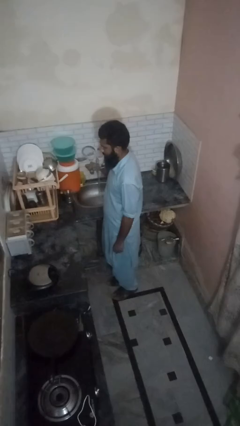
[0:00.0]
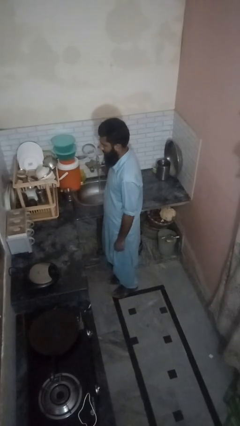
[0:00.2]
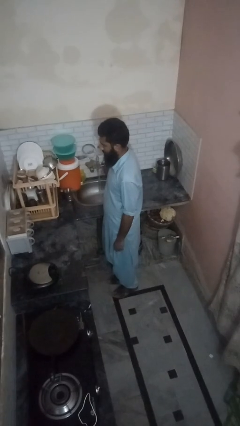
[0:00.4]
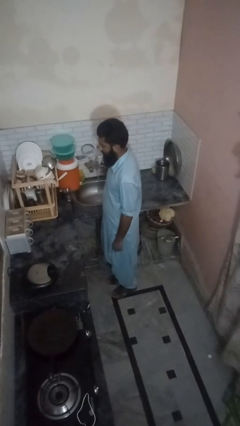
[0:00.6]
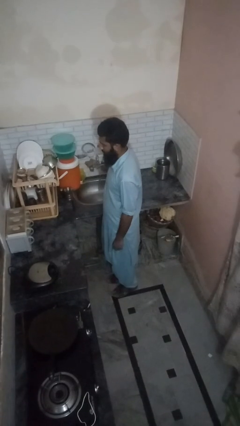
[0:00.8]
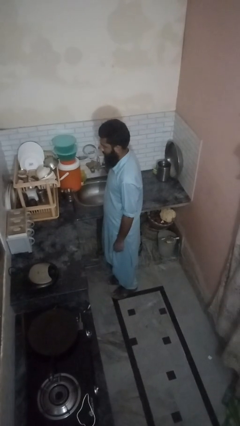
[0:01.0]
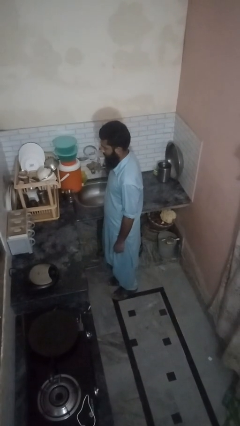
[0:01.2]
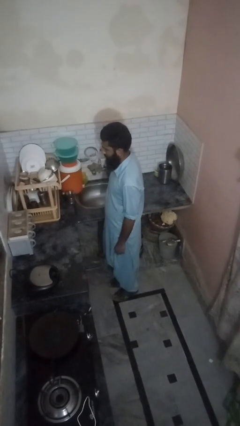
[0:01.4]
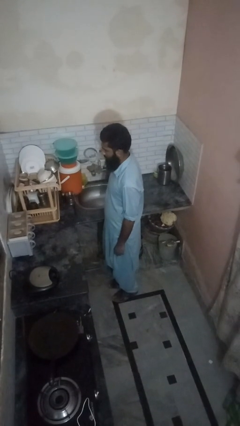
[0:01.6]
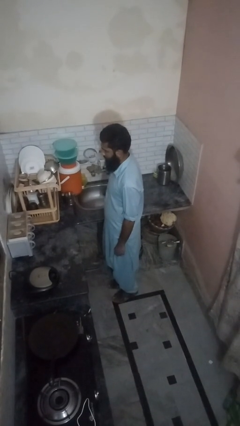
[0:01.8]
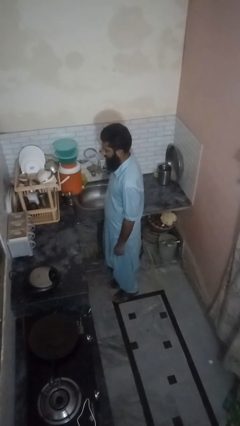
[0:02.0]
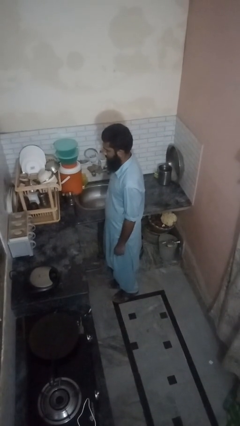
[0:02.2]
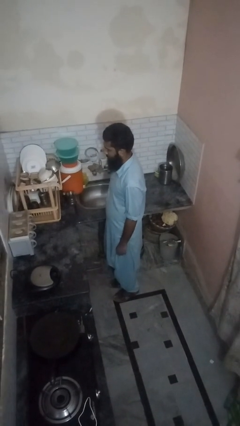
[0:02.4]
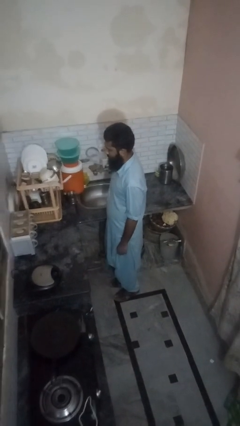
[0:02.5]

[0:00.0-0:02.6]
person turns off faucet

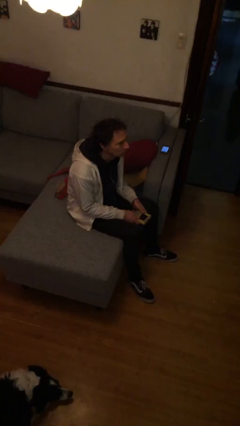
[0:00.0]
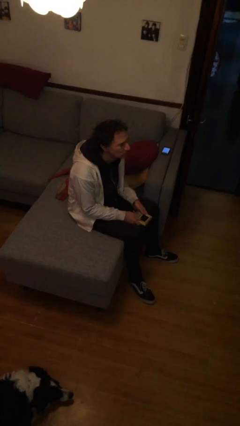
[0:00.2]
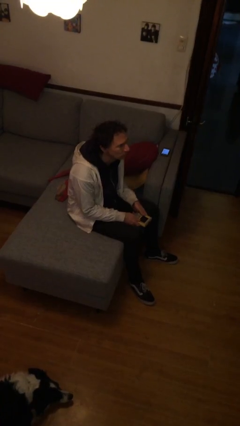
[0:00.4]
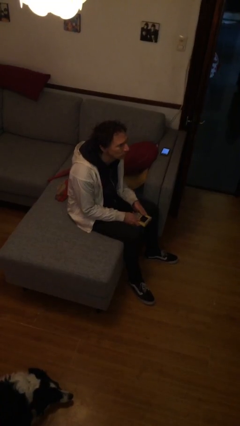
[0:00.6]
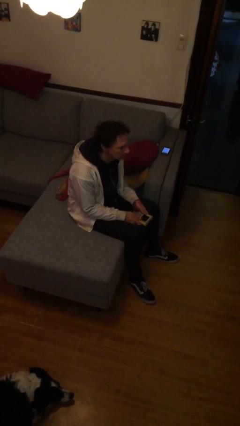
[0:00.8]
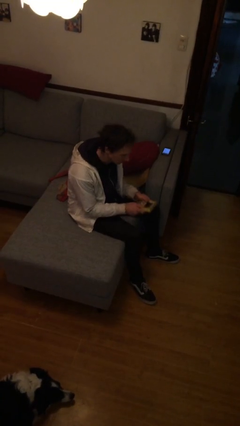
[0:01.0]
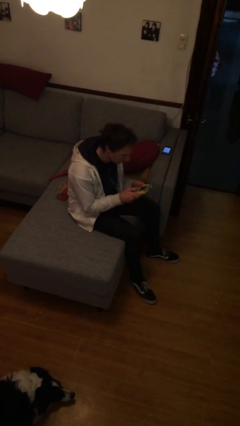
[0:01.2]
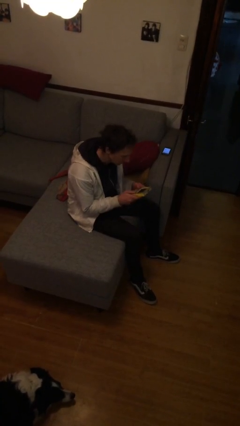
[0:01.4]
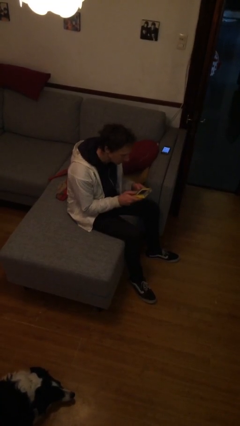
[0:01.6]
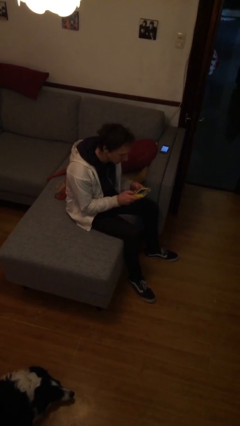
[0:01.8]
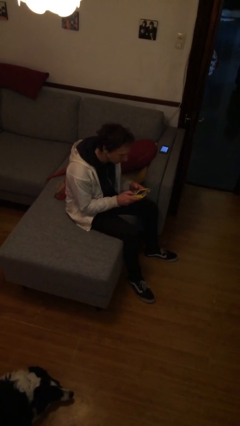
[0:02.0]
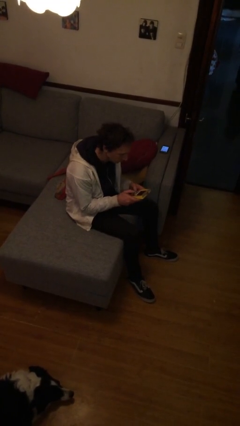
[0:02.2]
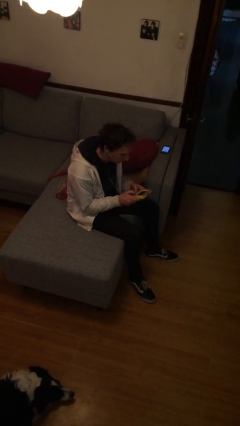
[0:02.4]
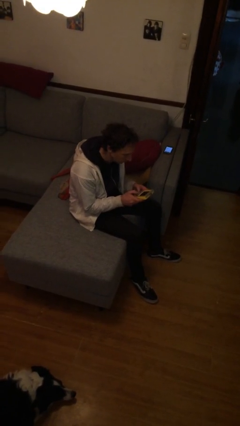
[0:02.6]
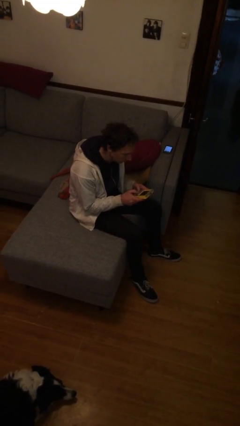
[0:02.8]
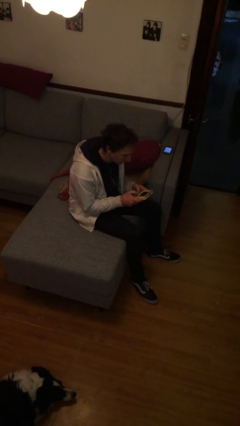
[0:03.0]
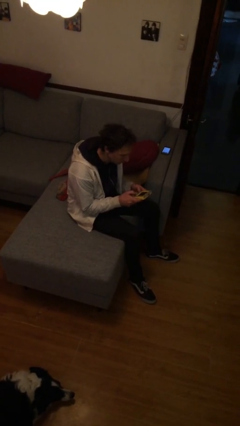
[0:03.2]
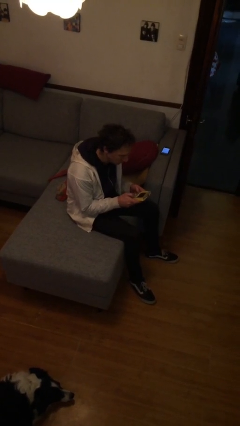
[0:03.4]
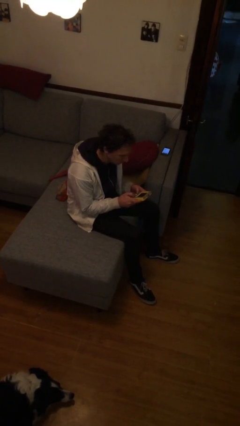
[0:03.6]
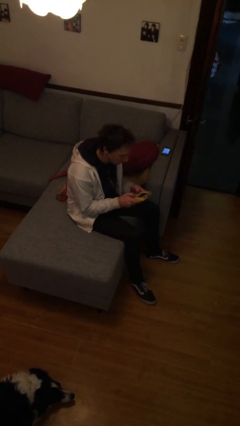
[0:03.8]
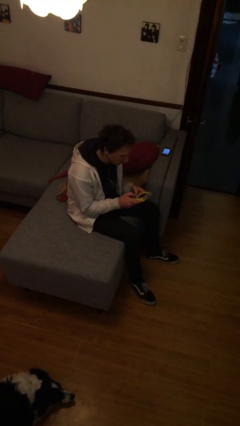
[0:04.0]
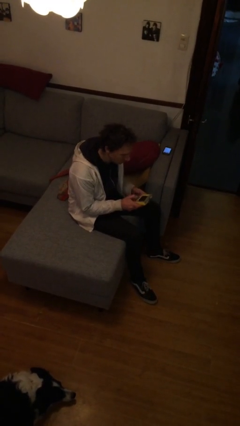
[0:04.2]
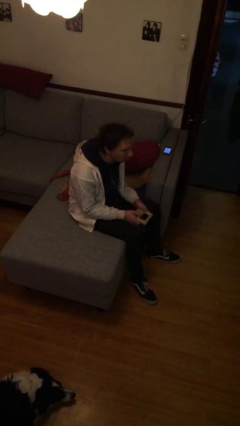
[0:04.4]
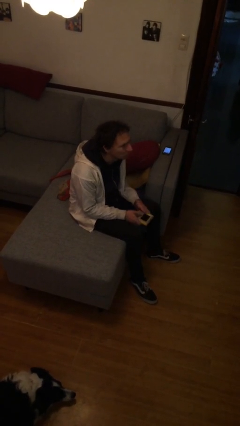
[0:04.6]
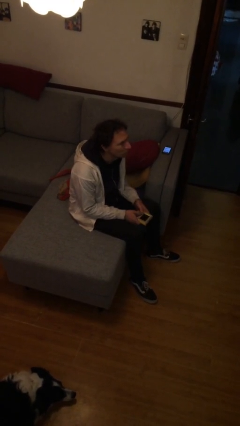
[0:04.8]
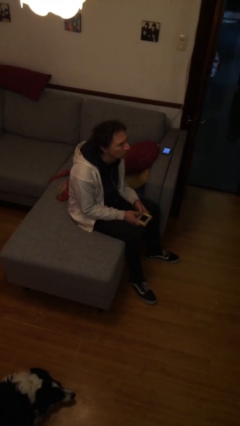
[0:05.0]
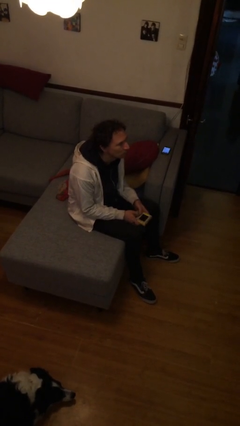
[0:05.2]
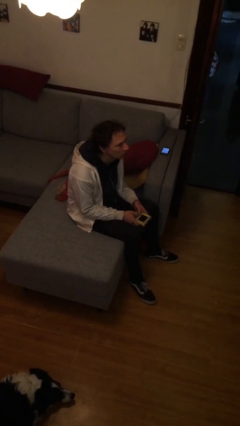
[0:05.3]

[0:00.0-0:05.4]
person interacts with handheld game

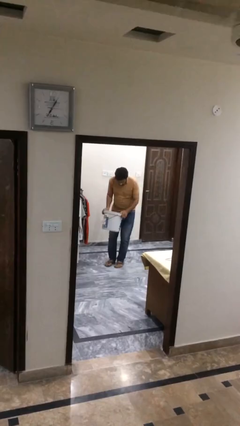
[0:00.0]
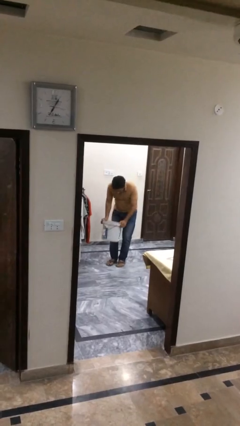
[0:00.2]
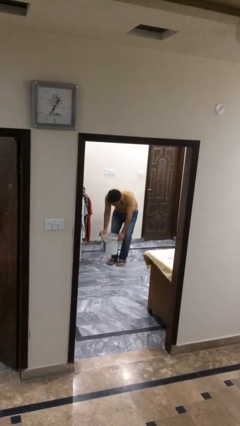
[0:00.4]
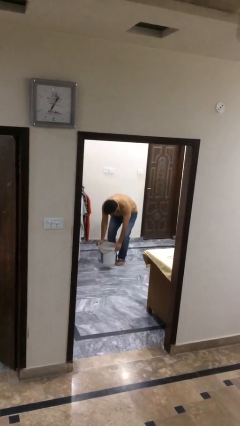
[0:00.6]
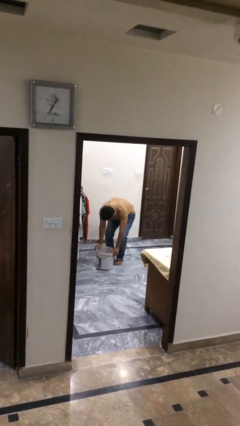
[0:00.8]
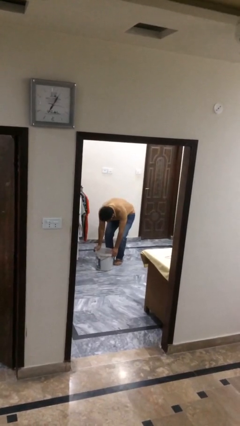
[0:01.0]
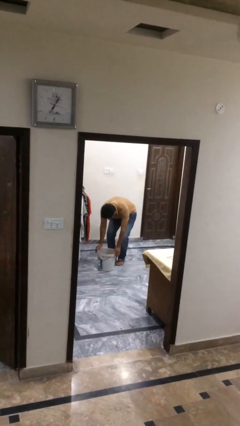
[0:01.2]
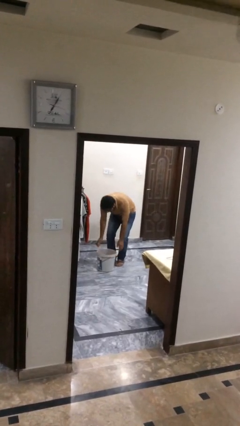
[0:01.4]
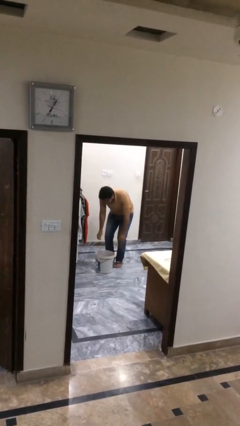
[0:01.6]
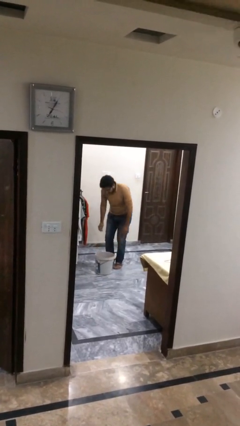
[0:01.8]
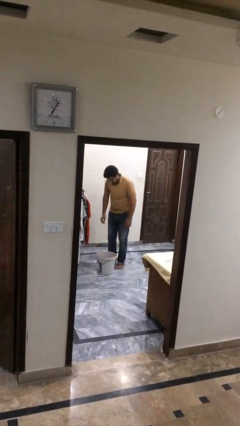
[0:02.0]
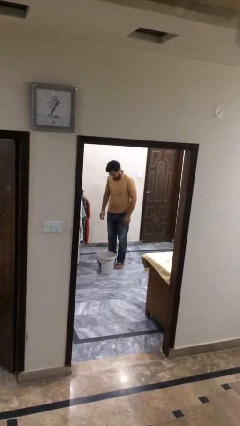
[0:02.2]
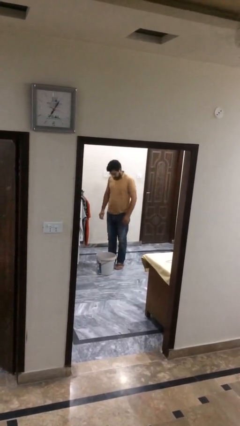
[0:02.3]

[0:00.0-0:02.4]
person puts down object on floor

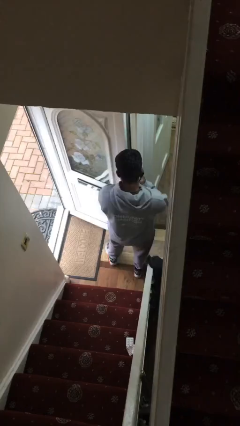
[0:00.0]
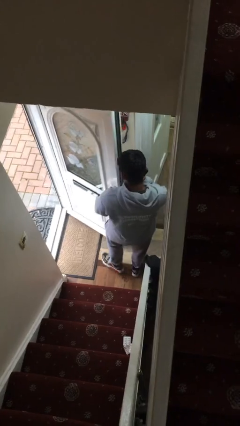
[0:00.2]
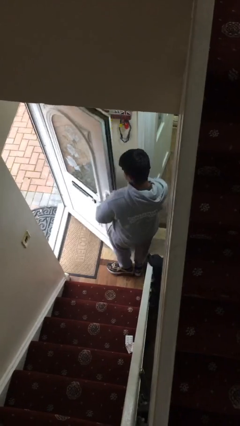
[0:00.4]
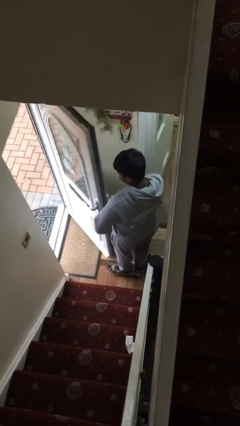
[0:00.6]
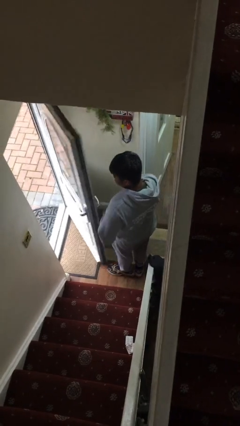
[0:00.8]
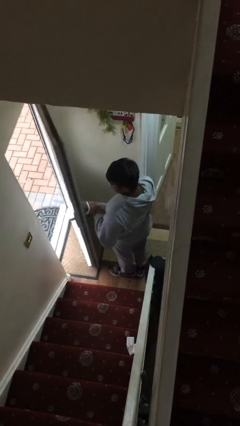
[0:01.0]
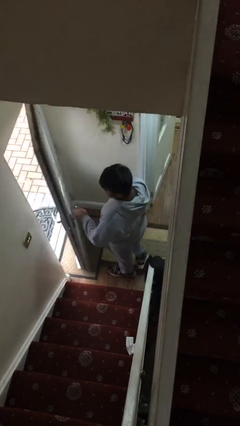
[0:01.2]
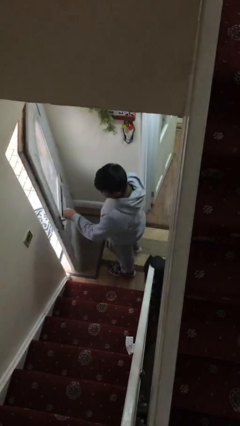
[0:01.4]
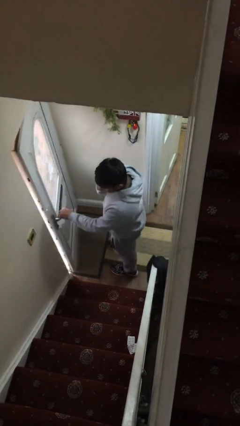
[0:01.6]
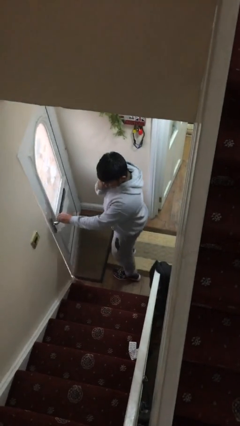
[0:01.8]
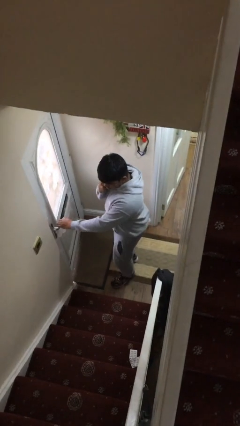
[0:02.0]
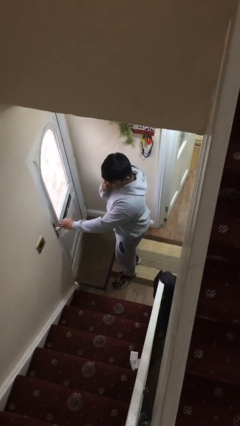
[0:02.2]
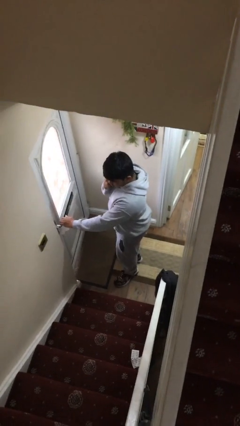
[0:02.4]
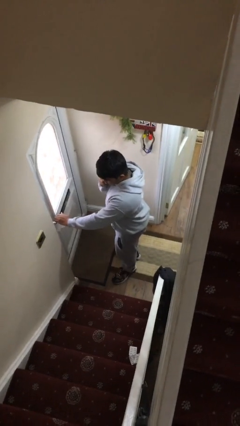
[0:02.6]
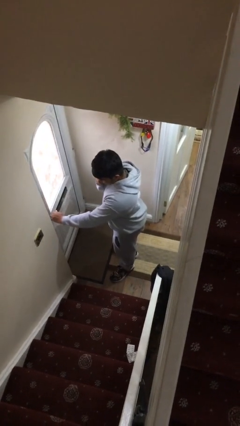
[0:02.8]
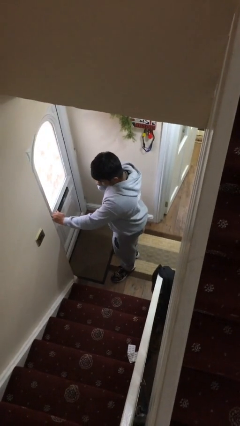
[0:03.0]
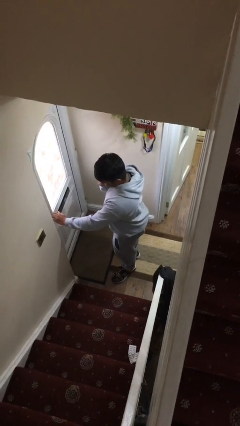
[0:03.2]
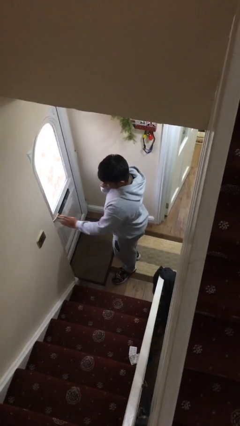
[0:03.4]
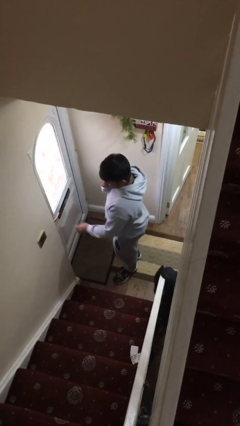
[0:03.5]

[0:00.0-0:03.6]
person closes facility door

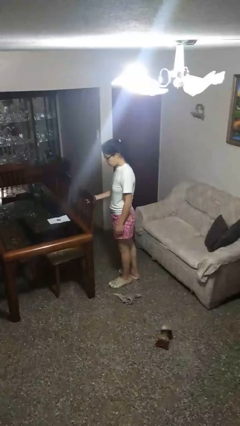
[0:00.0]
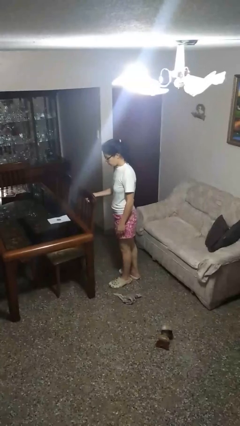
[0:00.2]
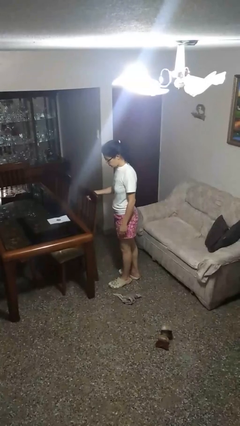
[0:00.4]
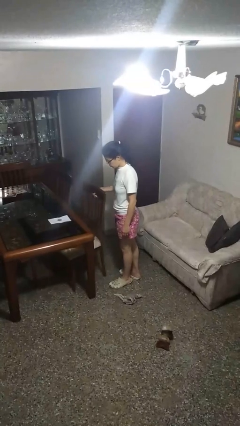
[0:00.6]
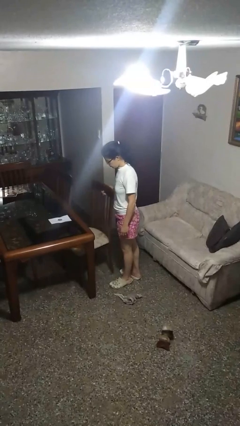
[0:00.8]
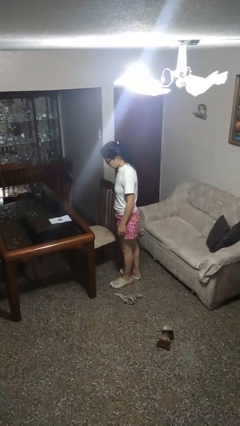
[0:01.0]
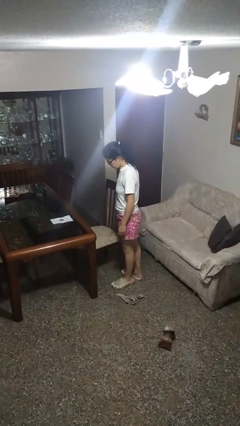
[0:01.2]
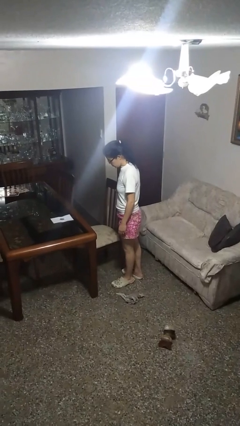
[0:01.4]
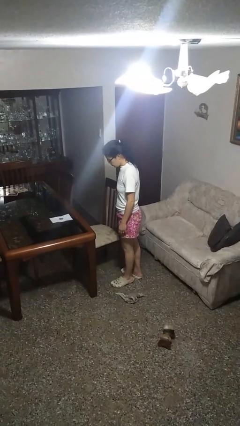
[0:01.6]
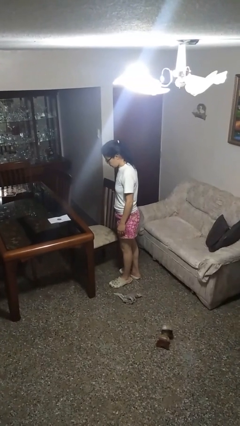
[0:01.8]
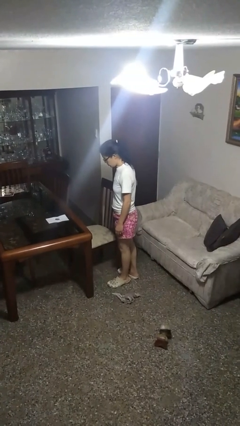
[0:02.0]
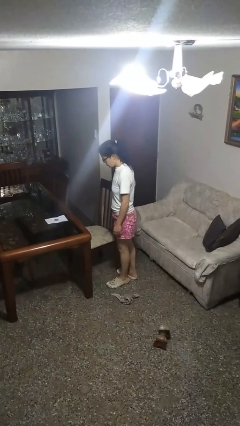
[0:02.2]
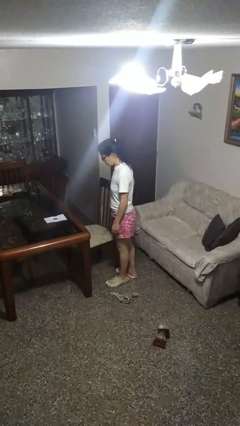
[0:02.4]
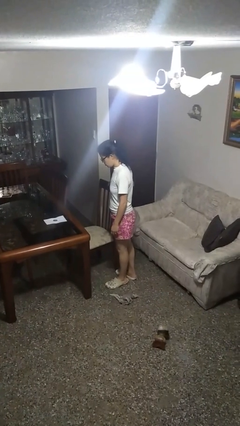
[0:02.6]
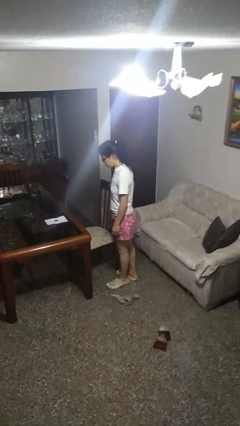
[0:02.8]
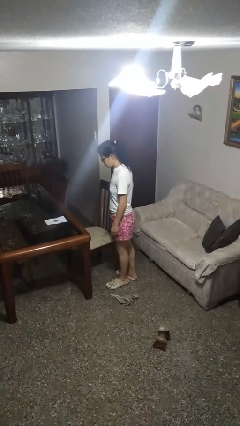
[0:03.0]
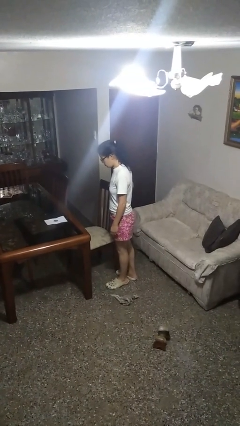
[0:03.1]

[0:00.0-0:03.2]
person pulls out chair

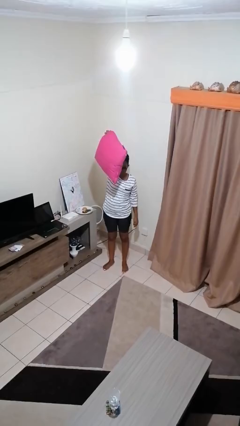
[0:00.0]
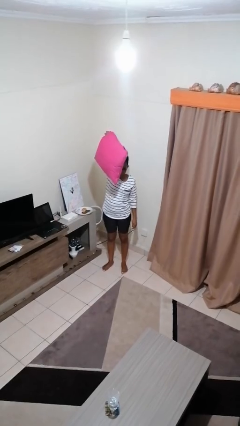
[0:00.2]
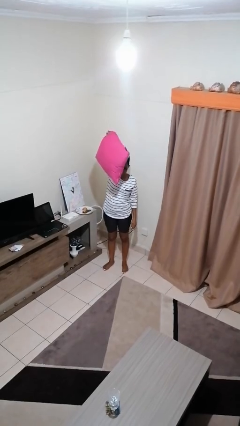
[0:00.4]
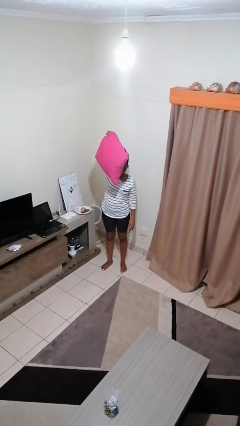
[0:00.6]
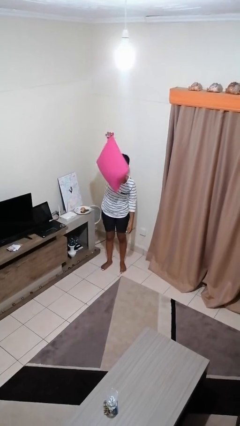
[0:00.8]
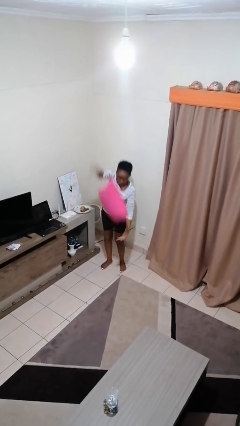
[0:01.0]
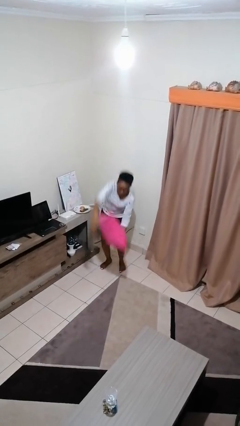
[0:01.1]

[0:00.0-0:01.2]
person drops object
